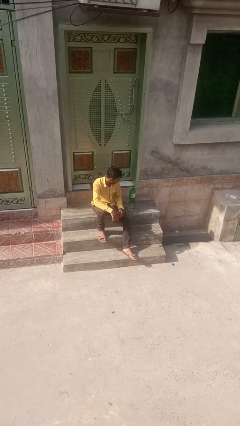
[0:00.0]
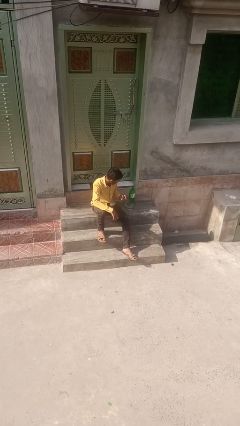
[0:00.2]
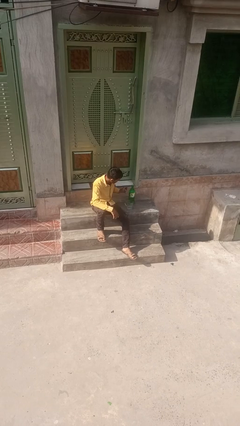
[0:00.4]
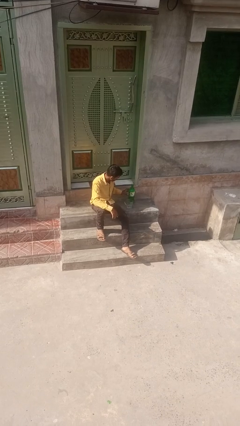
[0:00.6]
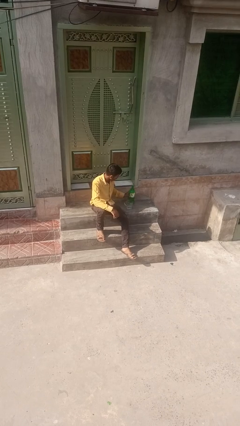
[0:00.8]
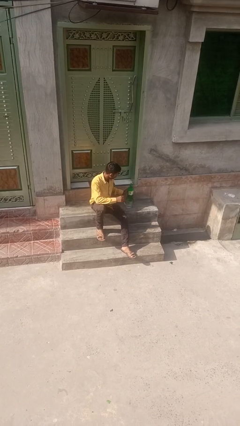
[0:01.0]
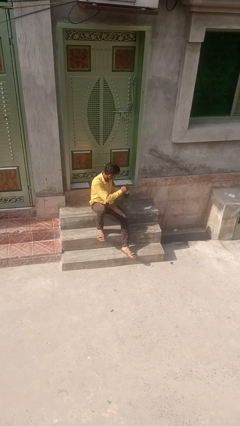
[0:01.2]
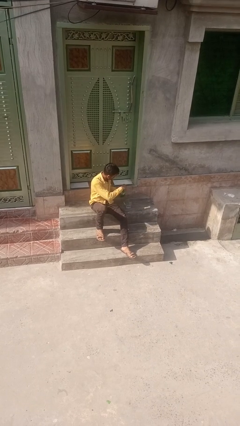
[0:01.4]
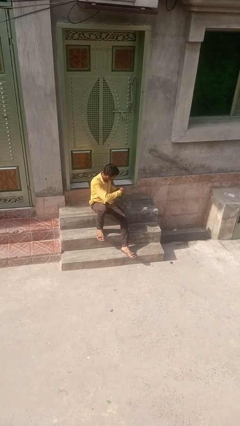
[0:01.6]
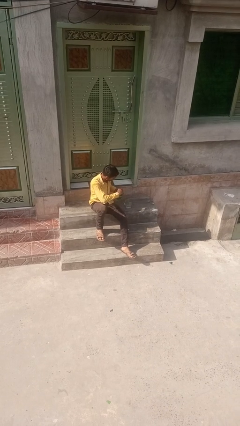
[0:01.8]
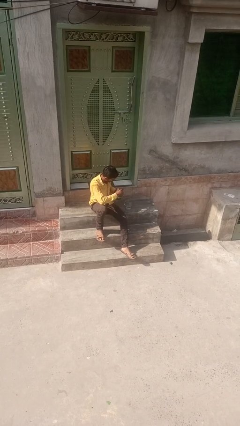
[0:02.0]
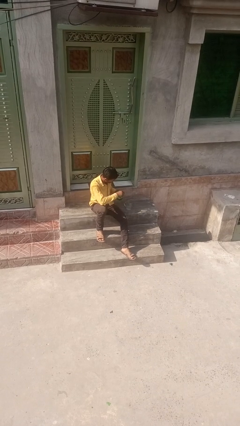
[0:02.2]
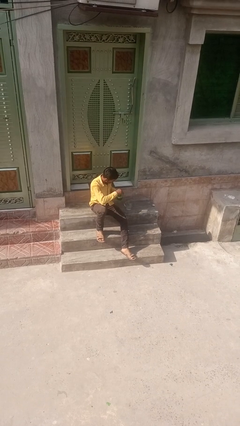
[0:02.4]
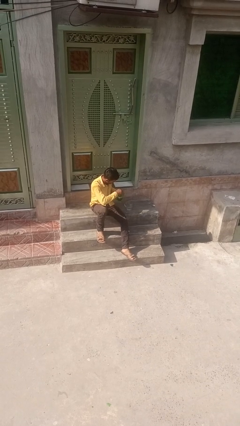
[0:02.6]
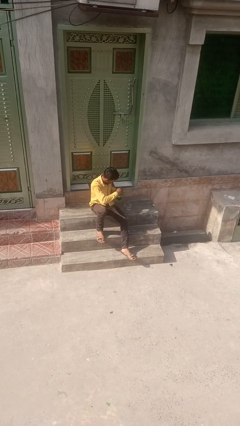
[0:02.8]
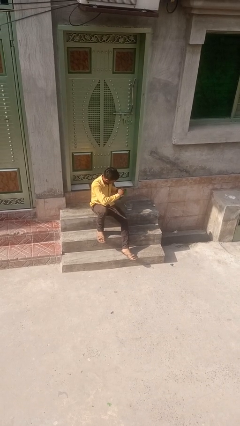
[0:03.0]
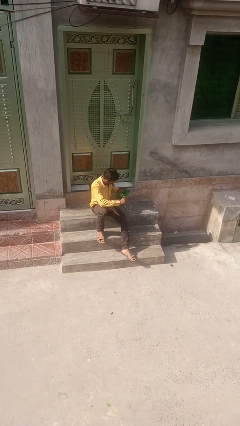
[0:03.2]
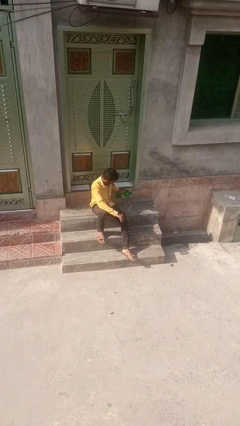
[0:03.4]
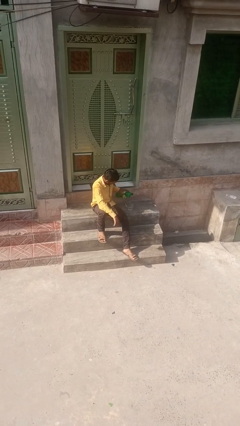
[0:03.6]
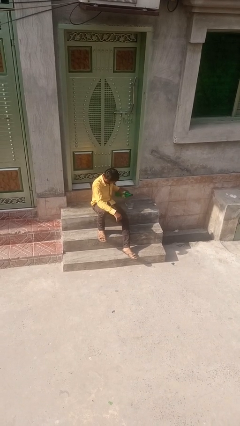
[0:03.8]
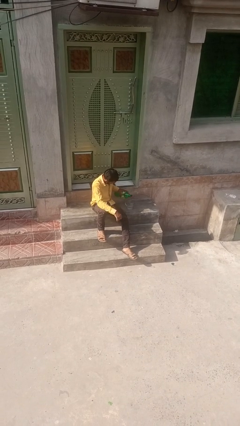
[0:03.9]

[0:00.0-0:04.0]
person unscrews lid from bottle

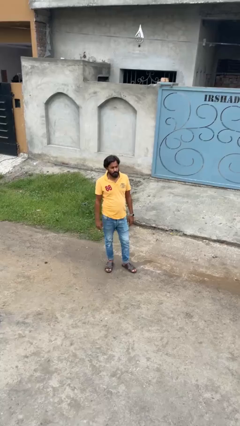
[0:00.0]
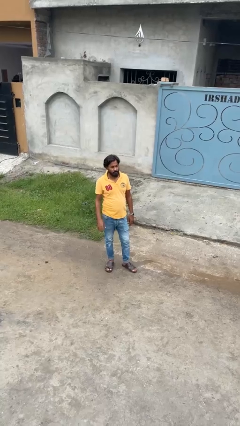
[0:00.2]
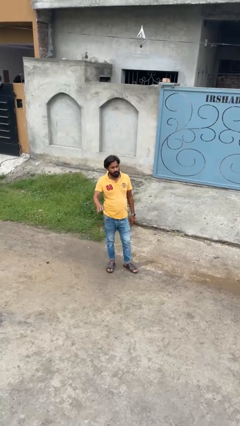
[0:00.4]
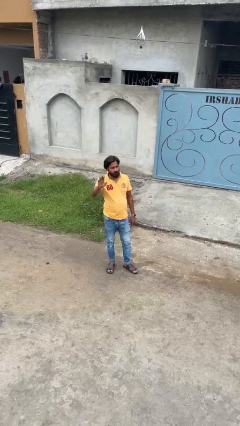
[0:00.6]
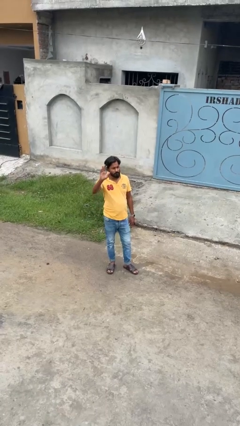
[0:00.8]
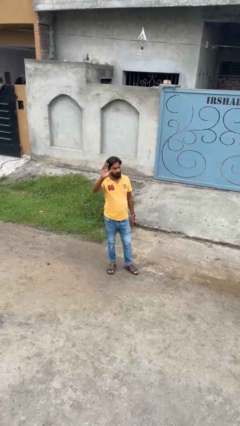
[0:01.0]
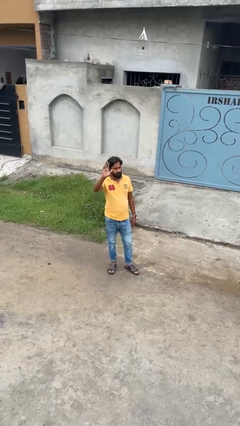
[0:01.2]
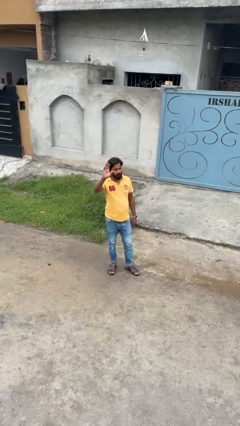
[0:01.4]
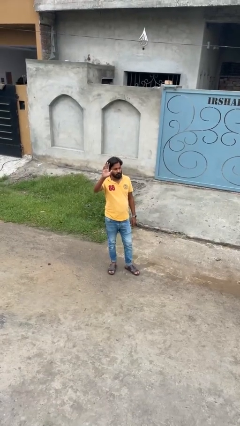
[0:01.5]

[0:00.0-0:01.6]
person gestures raise hand

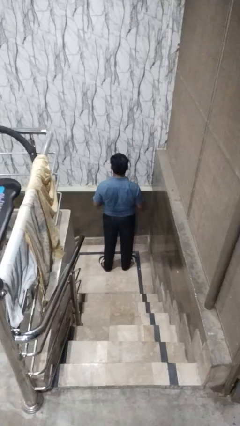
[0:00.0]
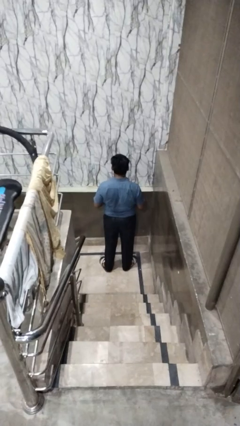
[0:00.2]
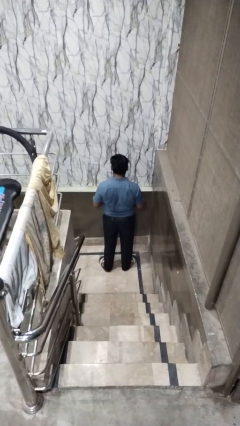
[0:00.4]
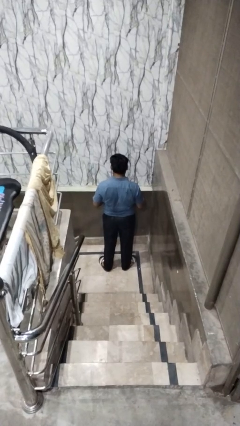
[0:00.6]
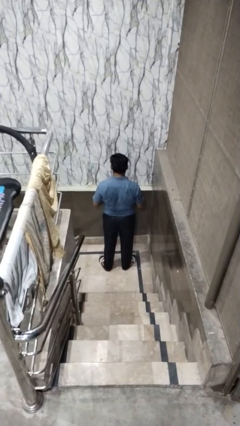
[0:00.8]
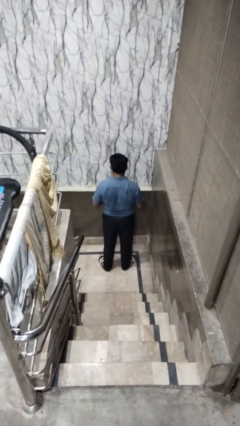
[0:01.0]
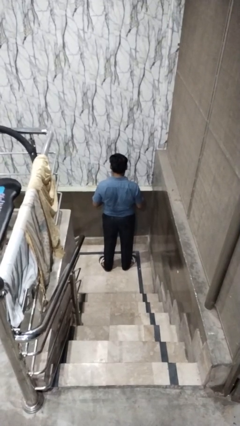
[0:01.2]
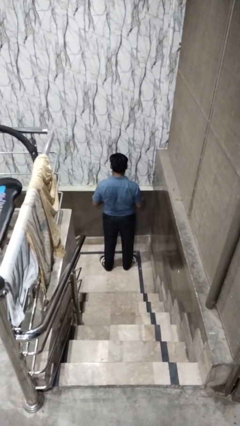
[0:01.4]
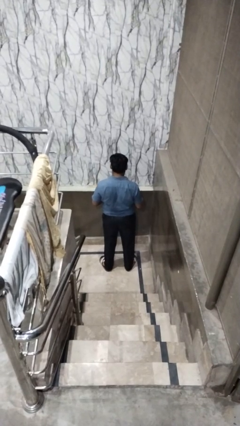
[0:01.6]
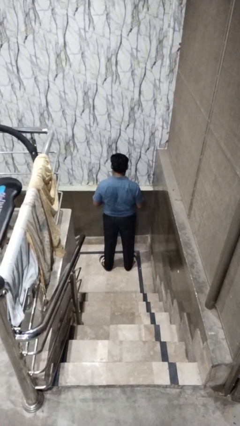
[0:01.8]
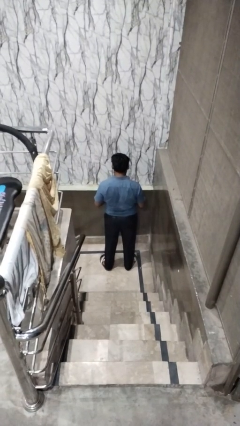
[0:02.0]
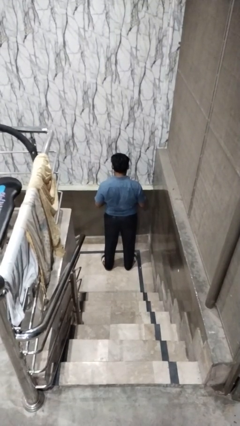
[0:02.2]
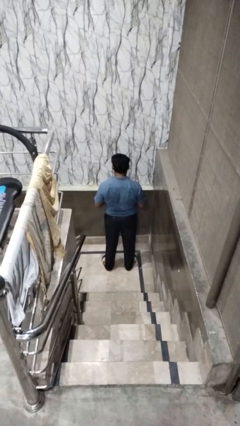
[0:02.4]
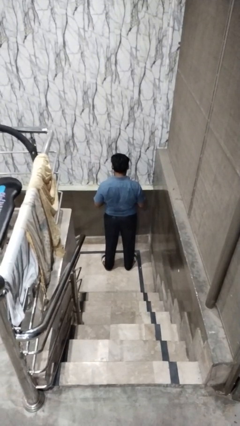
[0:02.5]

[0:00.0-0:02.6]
person sticks out tongue

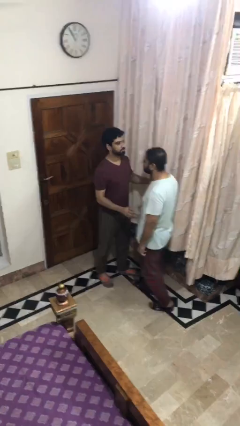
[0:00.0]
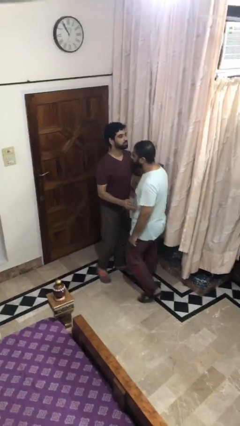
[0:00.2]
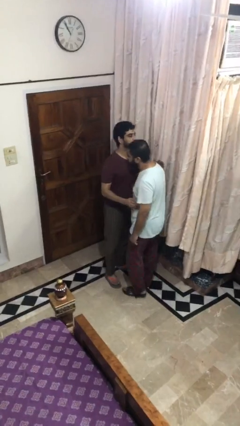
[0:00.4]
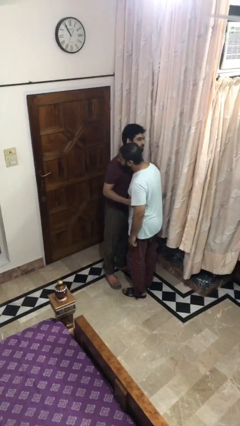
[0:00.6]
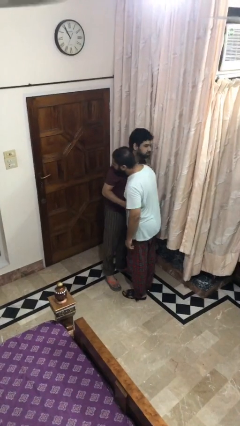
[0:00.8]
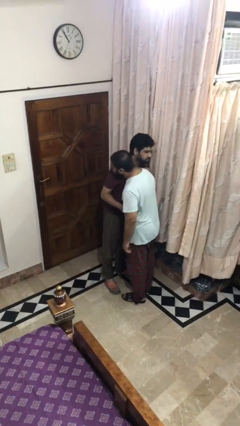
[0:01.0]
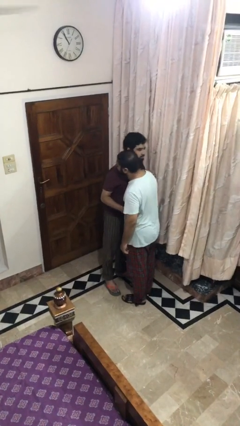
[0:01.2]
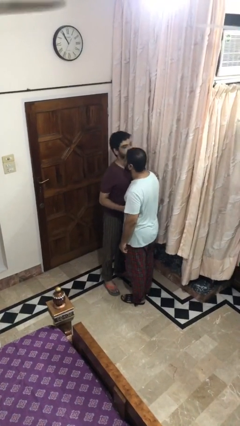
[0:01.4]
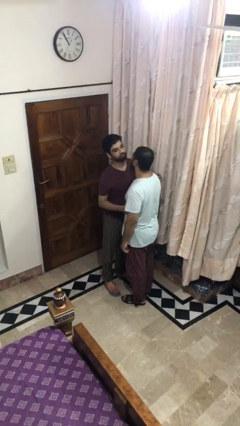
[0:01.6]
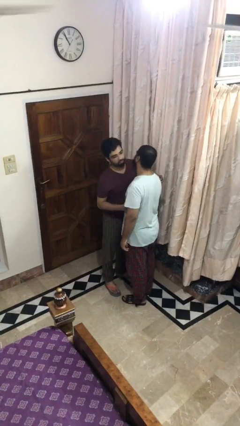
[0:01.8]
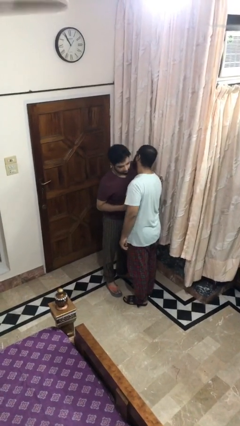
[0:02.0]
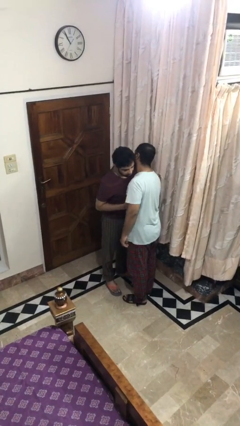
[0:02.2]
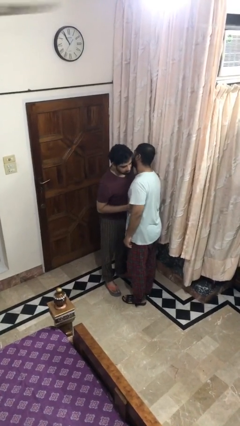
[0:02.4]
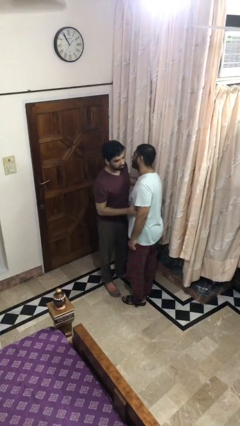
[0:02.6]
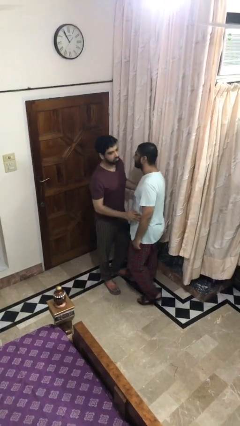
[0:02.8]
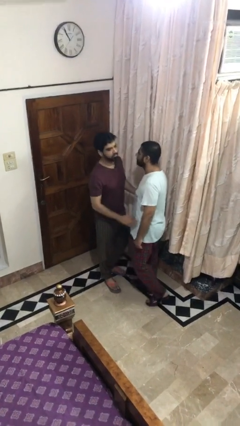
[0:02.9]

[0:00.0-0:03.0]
person embraces person

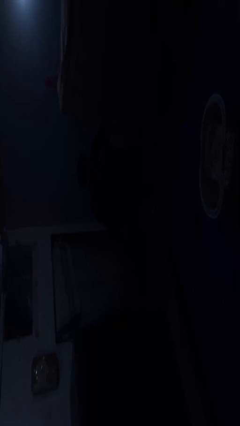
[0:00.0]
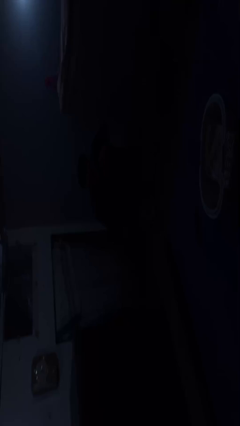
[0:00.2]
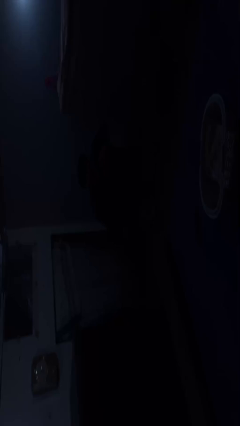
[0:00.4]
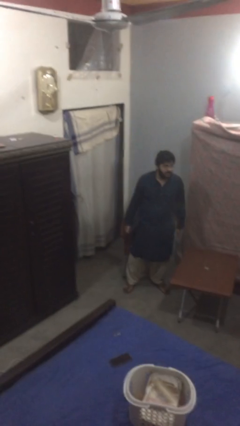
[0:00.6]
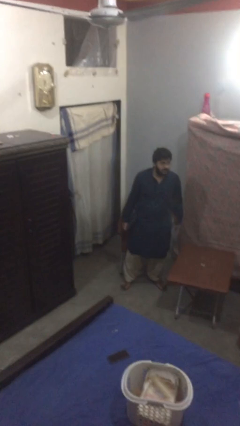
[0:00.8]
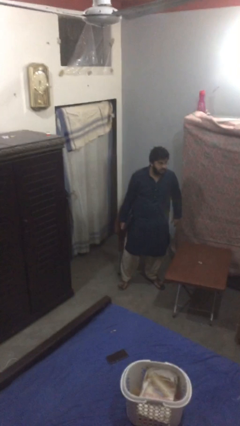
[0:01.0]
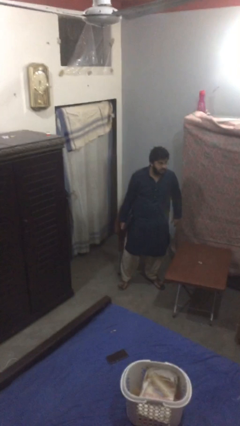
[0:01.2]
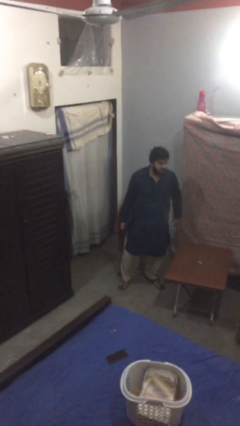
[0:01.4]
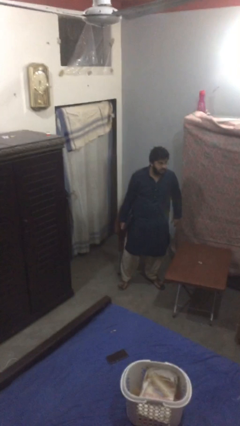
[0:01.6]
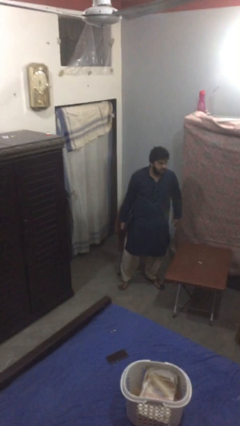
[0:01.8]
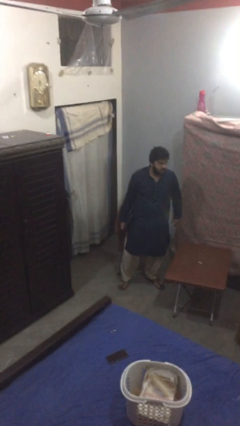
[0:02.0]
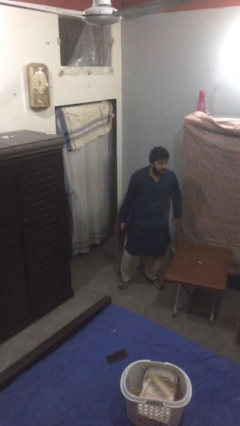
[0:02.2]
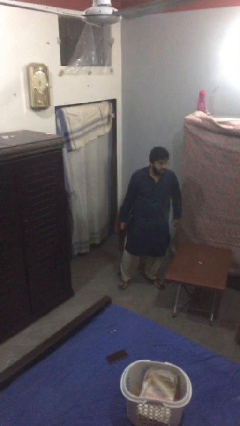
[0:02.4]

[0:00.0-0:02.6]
person sits down

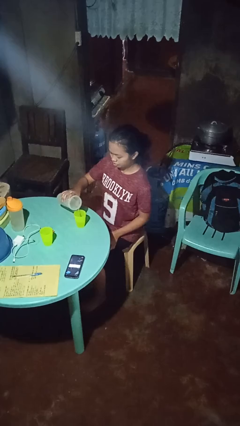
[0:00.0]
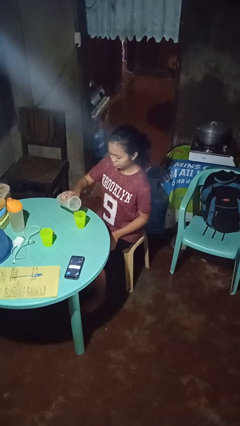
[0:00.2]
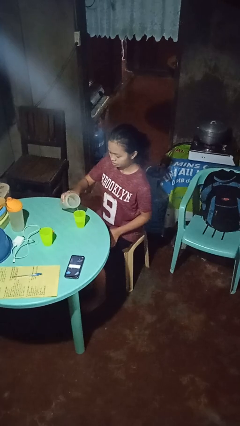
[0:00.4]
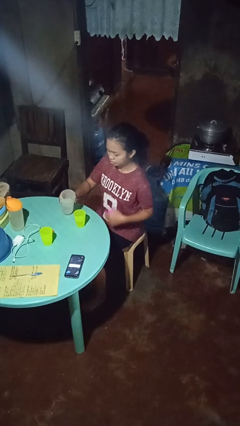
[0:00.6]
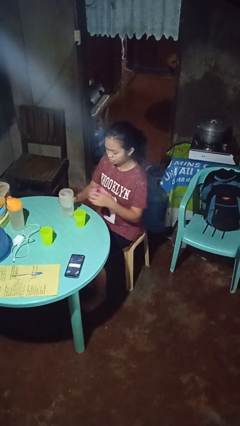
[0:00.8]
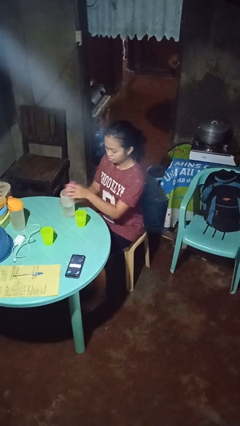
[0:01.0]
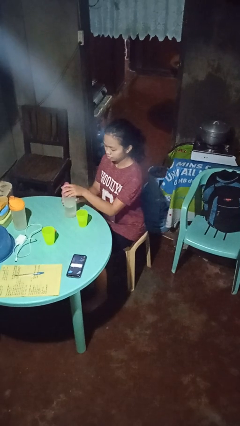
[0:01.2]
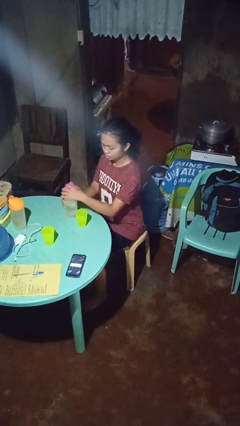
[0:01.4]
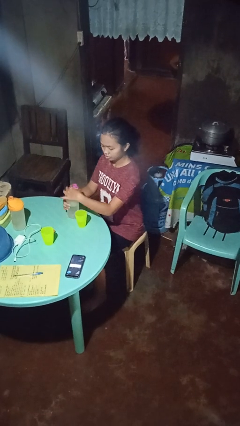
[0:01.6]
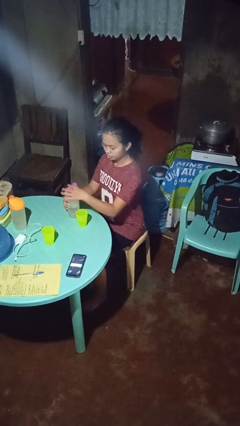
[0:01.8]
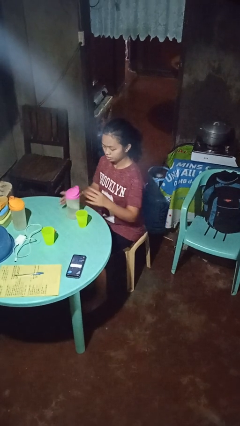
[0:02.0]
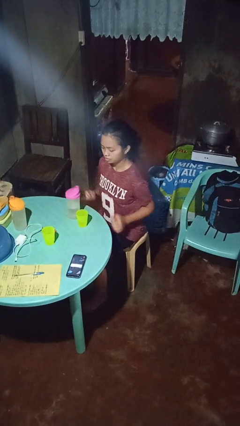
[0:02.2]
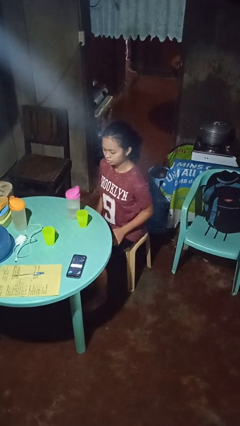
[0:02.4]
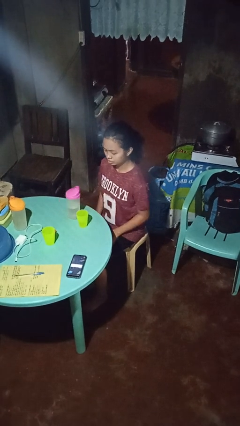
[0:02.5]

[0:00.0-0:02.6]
person screws lid to bottle

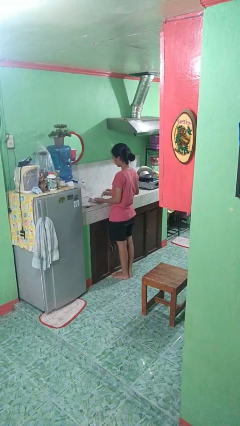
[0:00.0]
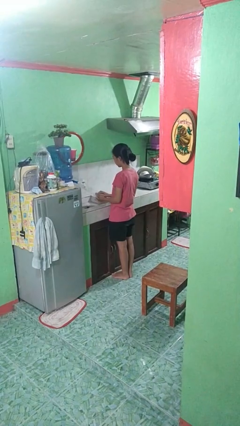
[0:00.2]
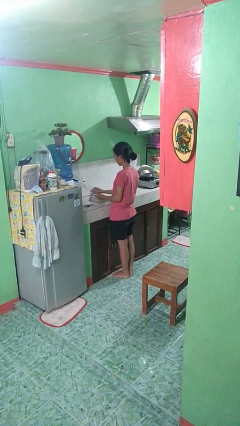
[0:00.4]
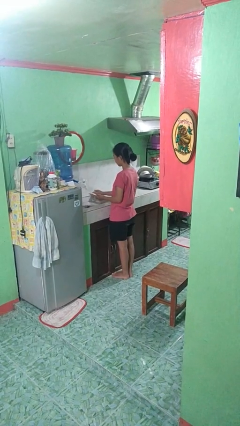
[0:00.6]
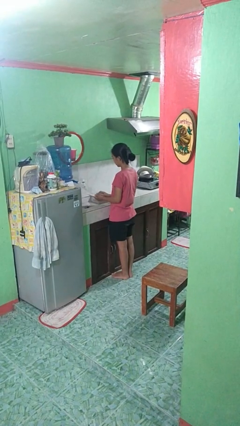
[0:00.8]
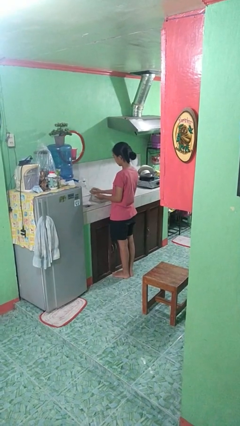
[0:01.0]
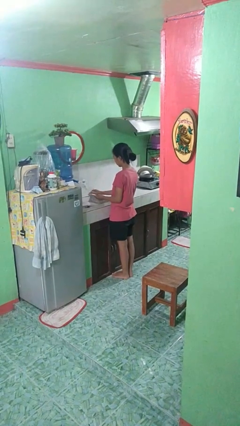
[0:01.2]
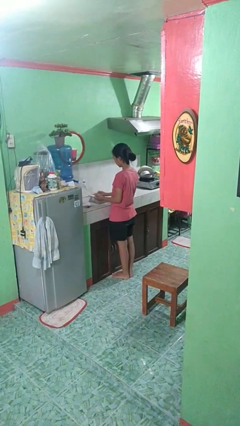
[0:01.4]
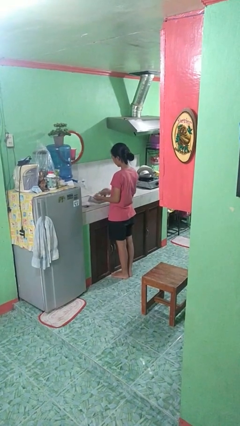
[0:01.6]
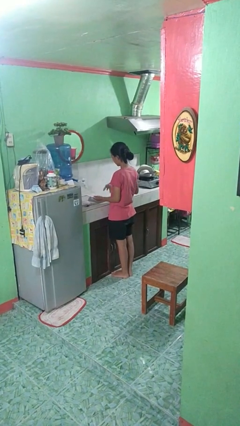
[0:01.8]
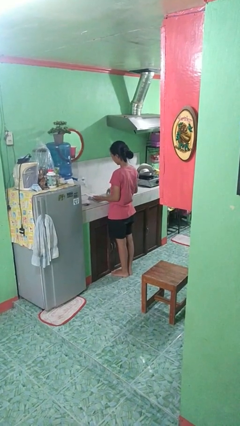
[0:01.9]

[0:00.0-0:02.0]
person dries dish
